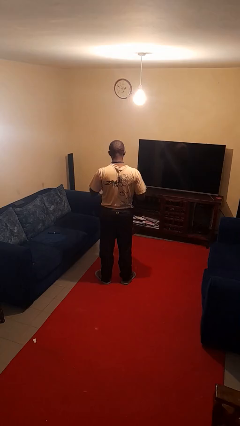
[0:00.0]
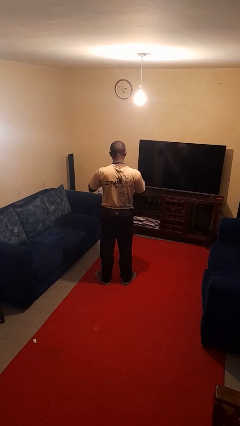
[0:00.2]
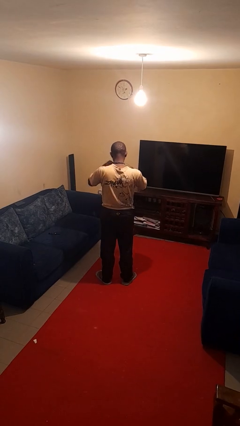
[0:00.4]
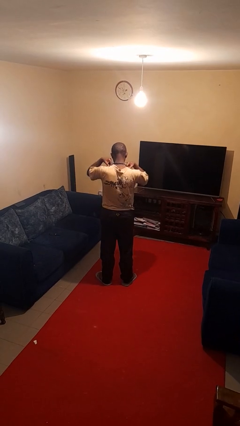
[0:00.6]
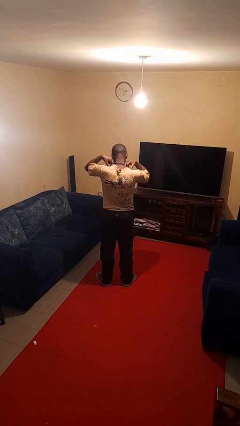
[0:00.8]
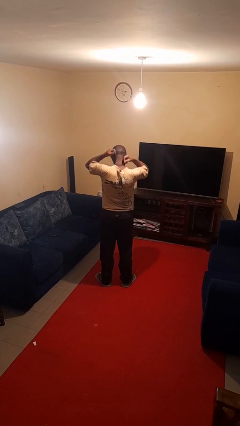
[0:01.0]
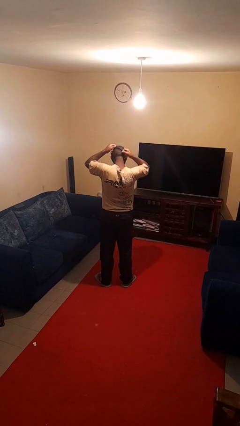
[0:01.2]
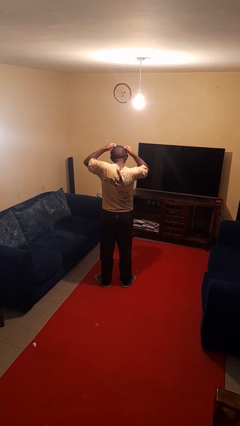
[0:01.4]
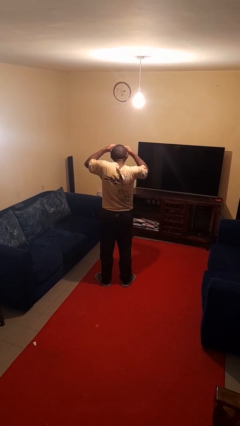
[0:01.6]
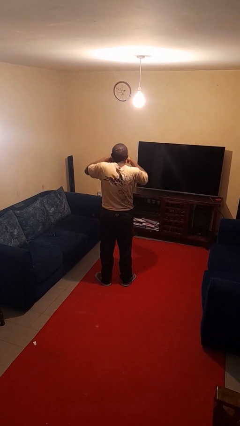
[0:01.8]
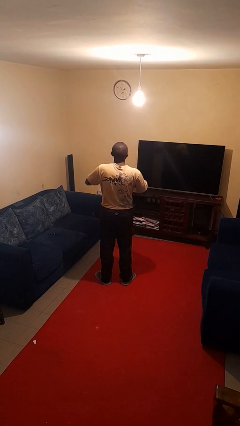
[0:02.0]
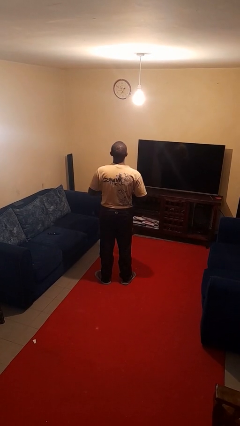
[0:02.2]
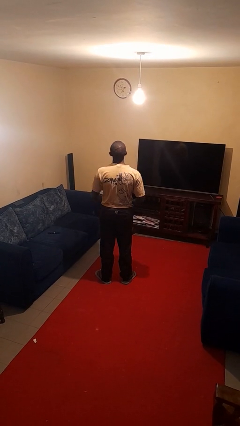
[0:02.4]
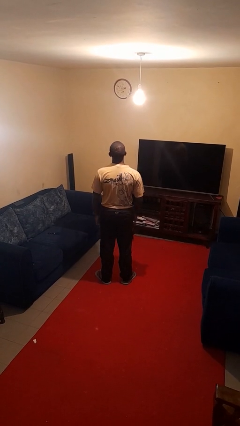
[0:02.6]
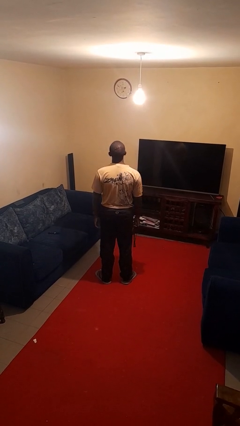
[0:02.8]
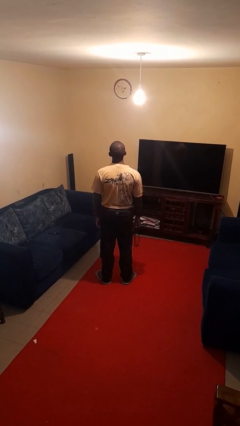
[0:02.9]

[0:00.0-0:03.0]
person takes off necklace

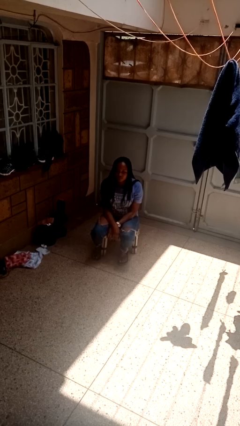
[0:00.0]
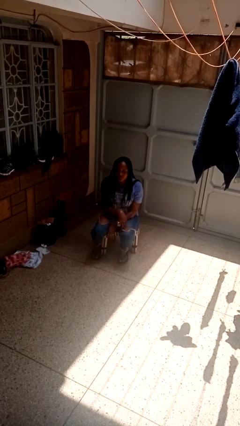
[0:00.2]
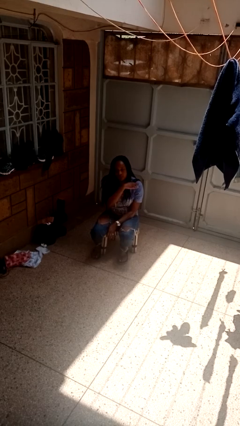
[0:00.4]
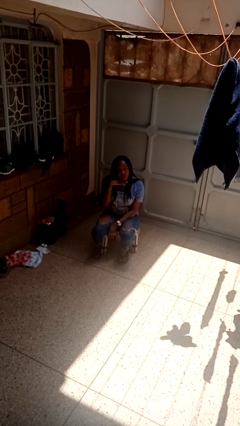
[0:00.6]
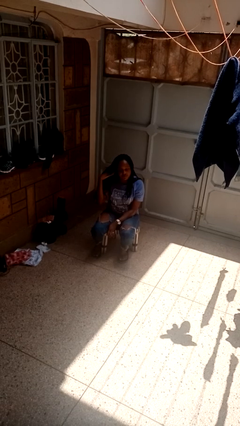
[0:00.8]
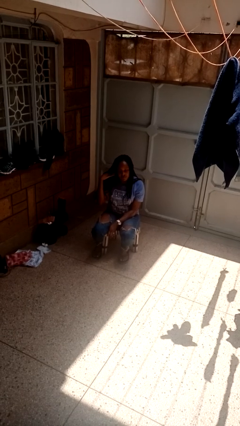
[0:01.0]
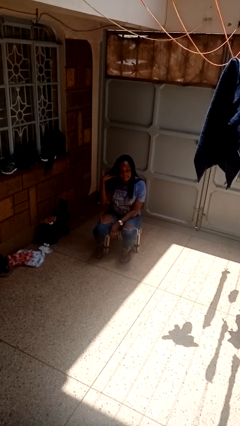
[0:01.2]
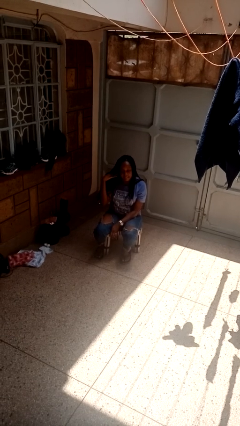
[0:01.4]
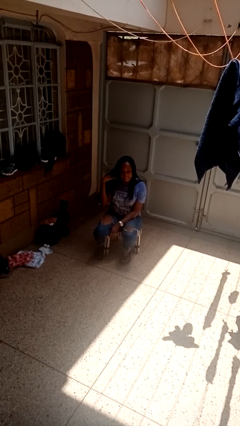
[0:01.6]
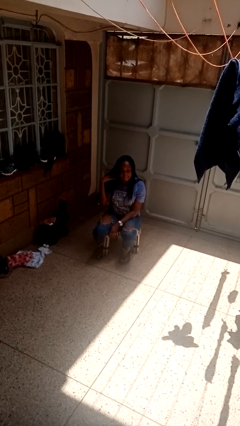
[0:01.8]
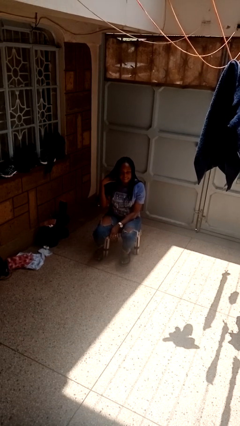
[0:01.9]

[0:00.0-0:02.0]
person gestures cut

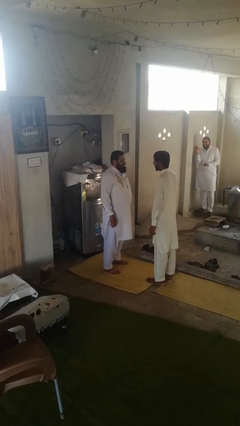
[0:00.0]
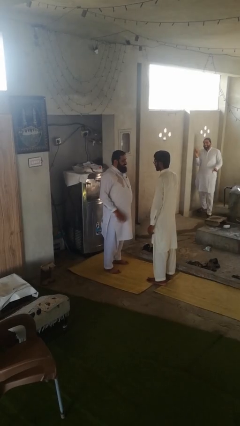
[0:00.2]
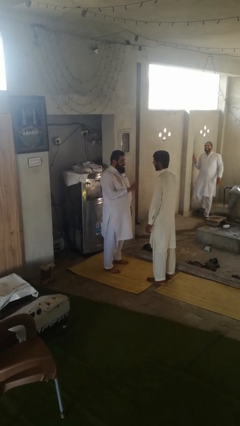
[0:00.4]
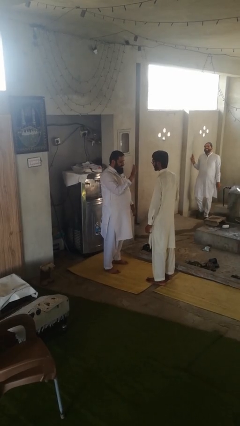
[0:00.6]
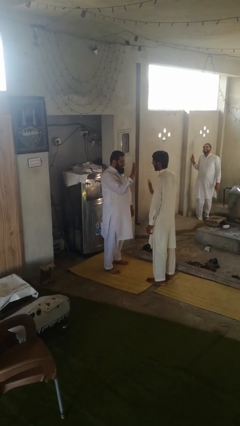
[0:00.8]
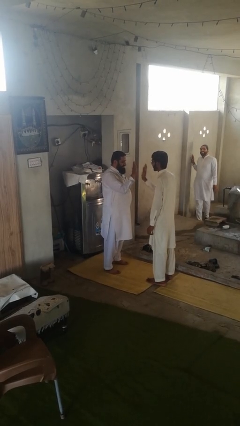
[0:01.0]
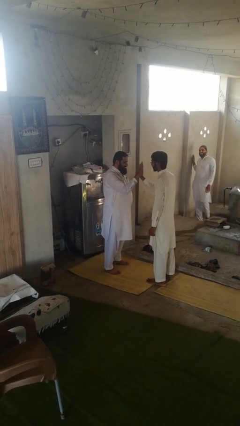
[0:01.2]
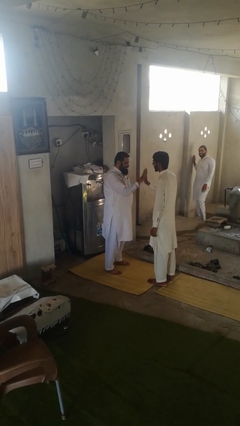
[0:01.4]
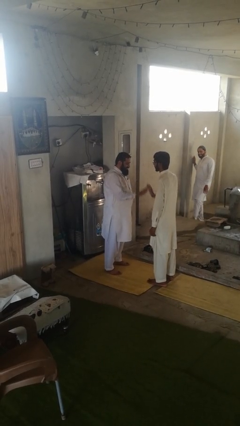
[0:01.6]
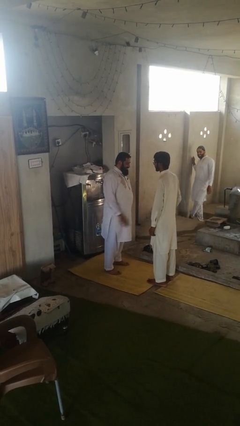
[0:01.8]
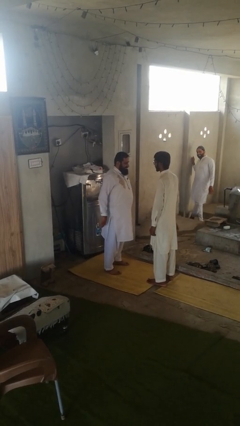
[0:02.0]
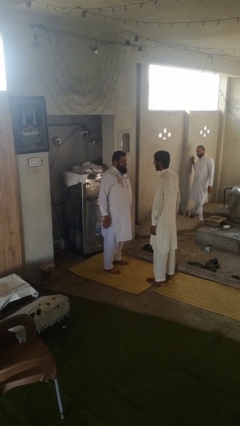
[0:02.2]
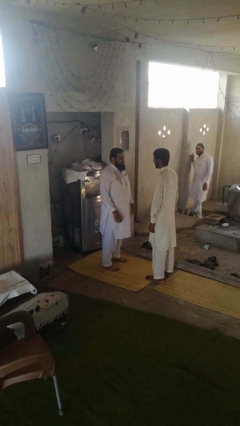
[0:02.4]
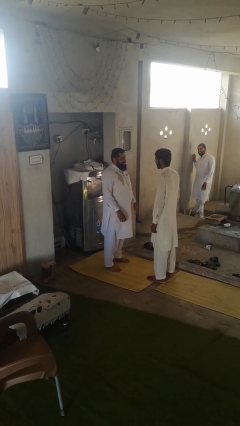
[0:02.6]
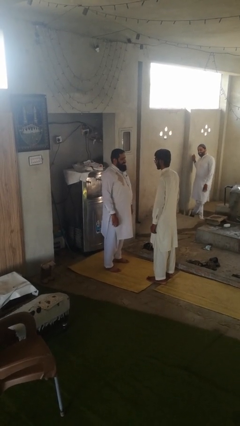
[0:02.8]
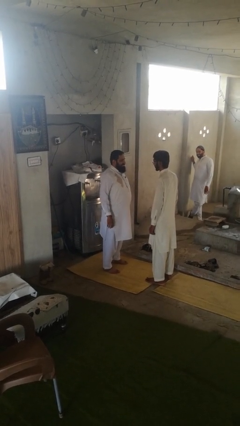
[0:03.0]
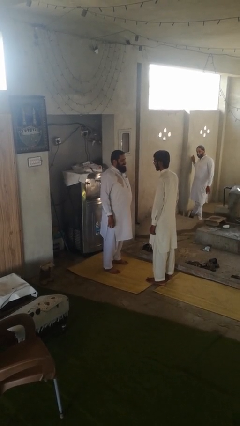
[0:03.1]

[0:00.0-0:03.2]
person highfives hand

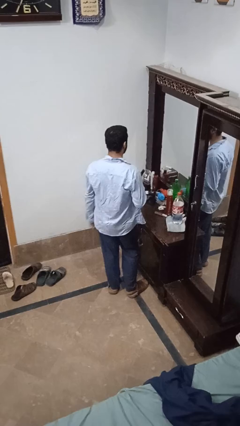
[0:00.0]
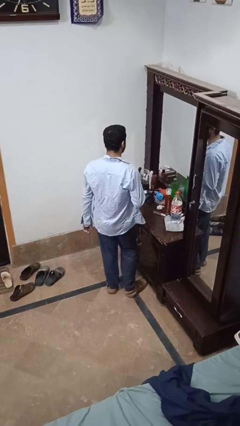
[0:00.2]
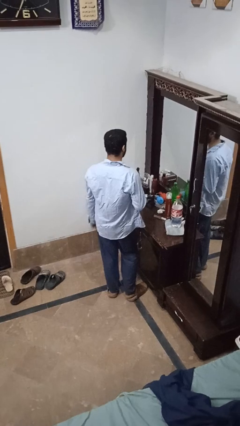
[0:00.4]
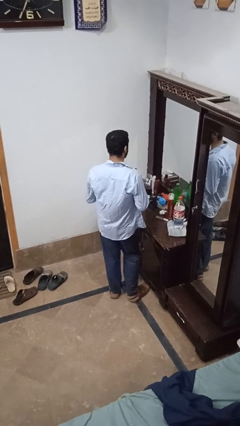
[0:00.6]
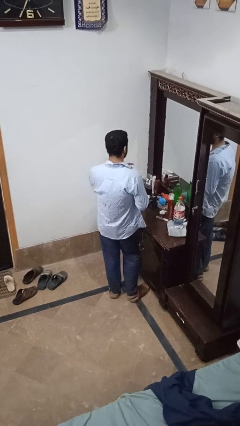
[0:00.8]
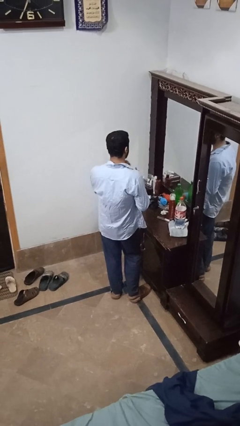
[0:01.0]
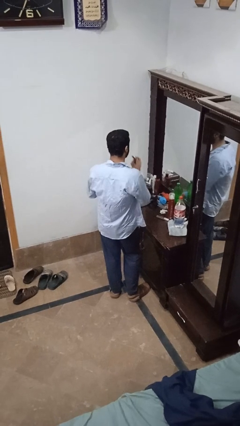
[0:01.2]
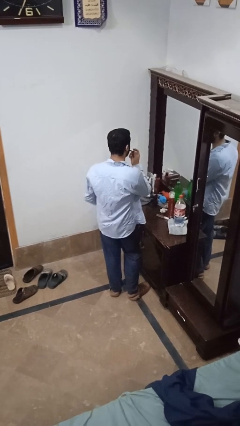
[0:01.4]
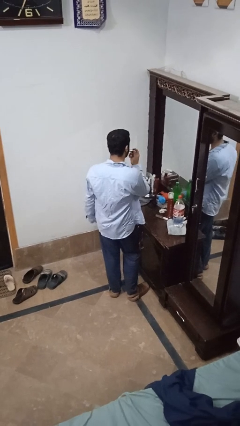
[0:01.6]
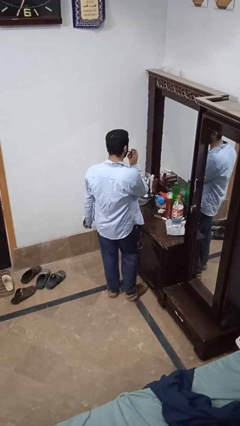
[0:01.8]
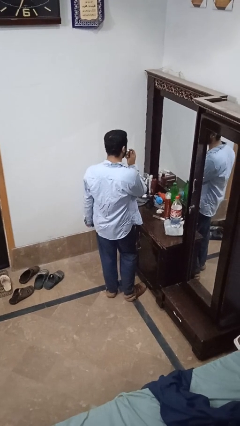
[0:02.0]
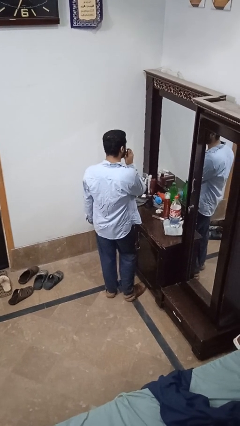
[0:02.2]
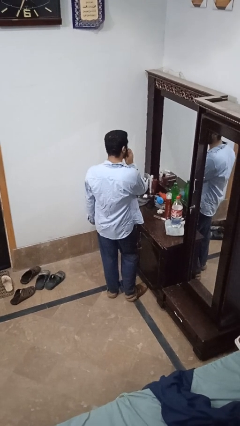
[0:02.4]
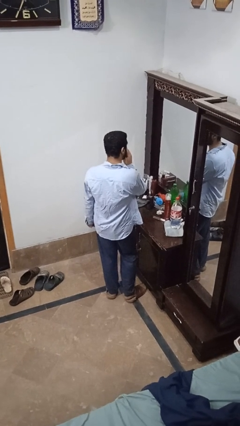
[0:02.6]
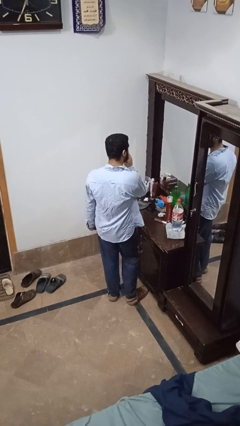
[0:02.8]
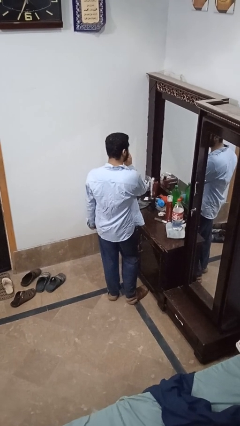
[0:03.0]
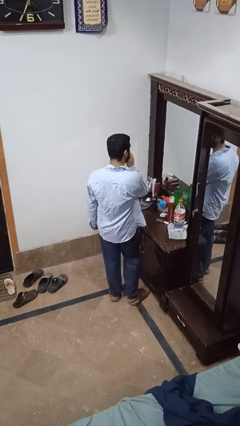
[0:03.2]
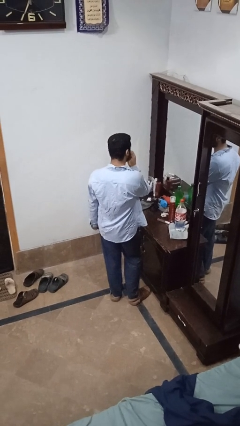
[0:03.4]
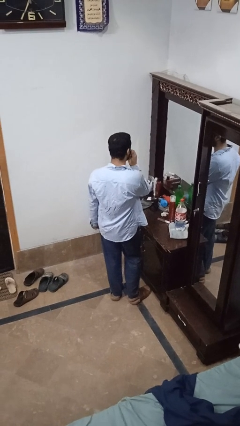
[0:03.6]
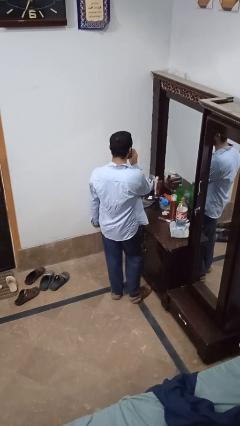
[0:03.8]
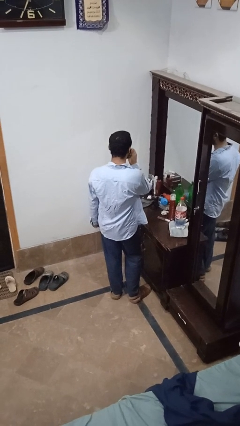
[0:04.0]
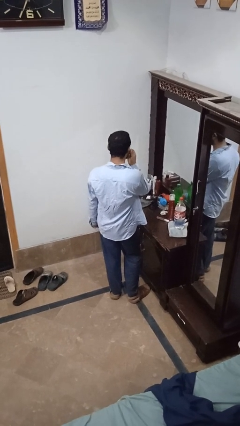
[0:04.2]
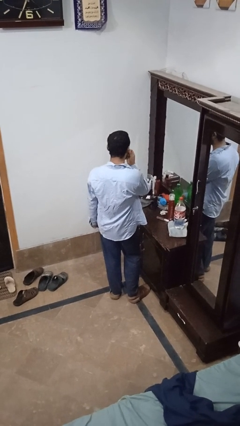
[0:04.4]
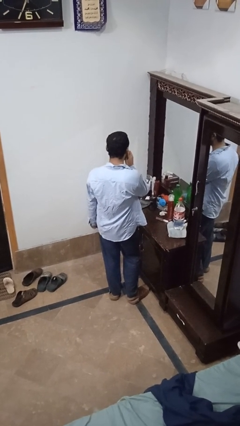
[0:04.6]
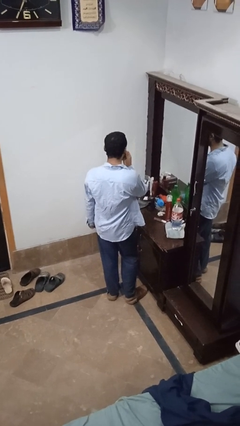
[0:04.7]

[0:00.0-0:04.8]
person applies lip makeup

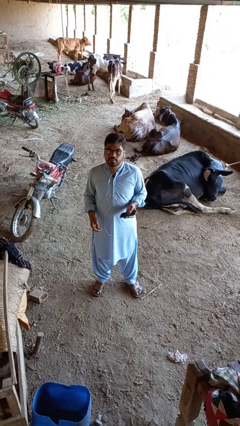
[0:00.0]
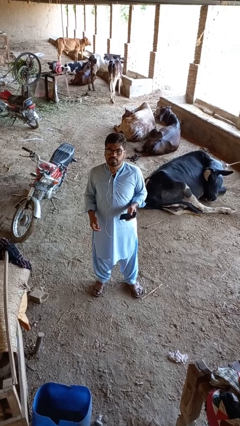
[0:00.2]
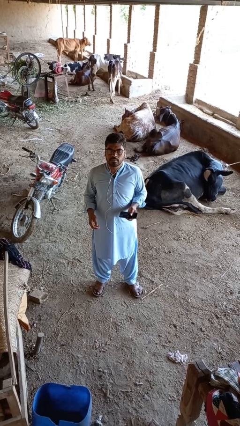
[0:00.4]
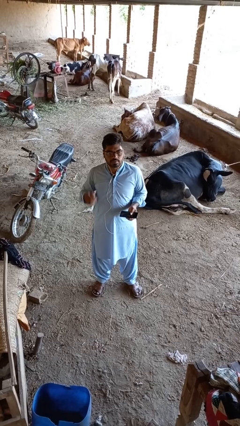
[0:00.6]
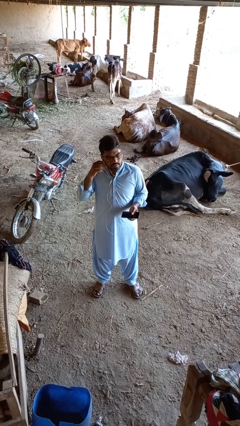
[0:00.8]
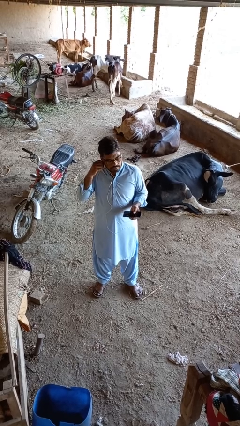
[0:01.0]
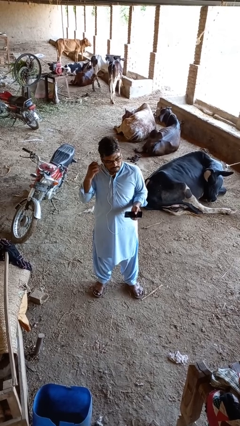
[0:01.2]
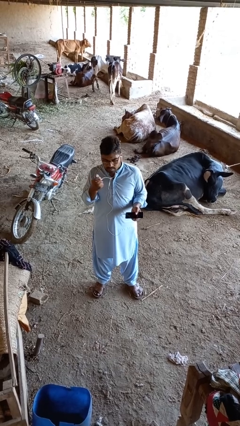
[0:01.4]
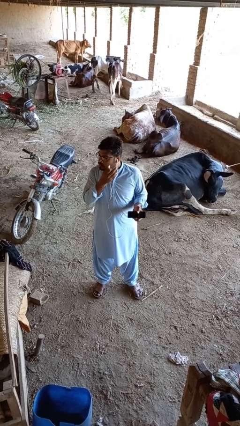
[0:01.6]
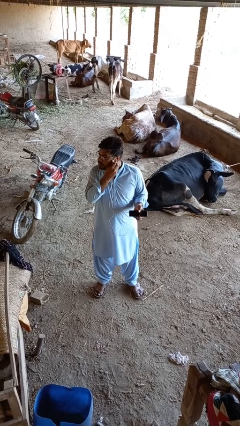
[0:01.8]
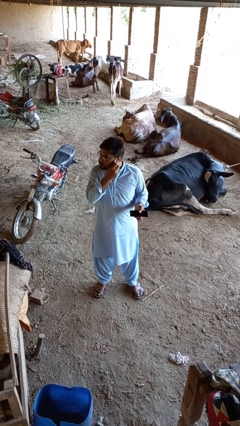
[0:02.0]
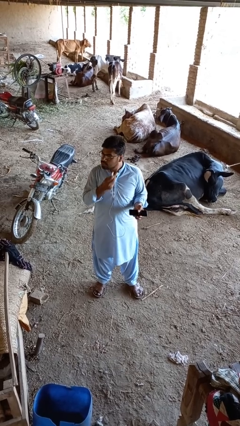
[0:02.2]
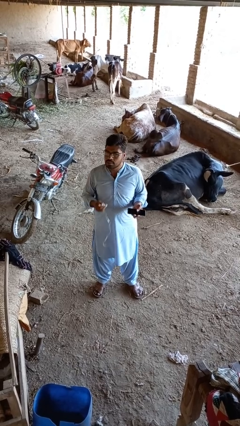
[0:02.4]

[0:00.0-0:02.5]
person takes off headphones

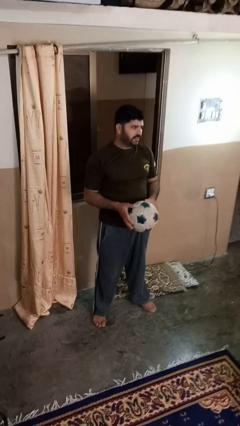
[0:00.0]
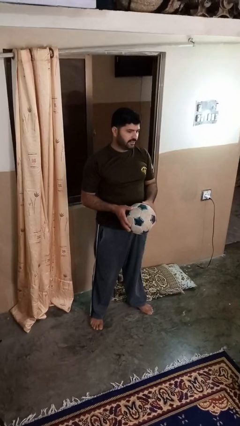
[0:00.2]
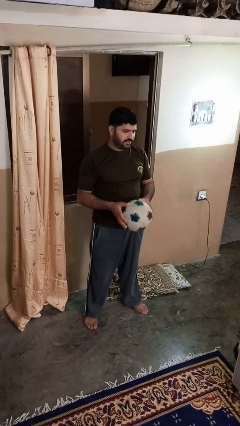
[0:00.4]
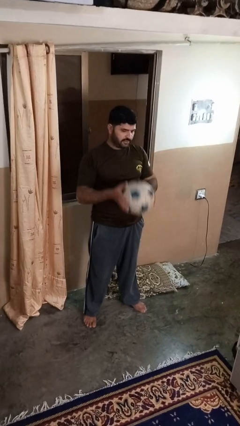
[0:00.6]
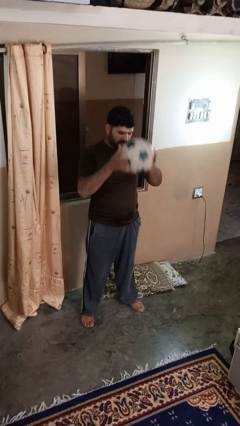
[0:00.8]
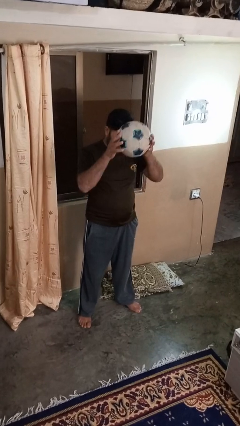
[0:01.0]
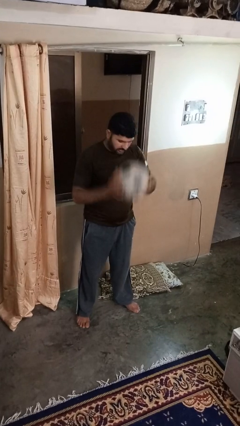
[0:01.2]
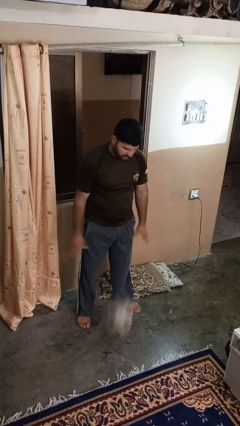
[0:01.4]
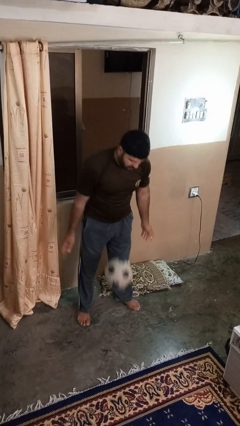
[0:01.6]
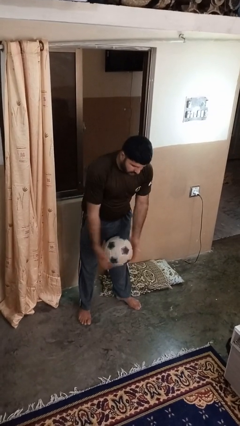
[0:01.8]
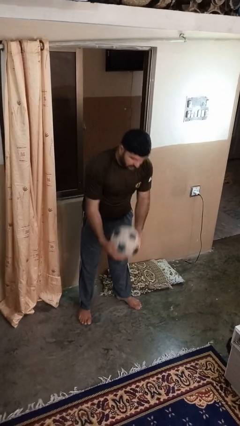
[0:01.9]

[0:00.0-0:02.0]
person bounces ball on floor
